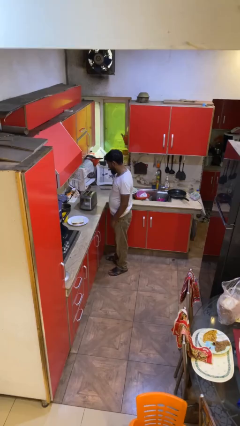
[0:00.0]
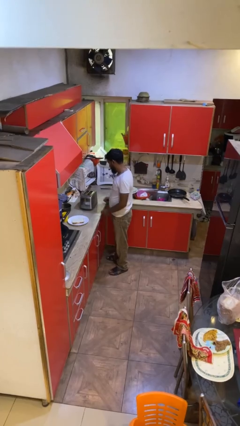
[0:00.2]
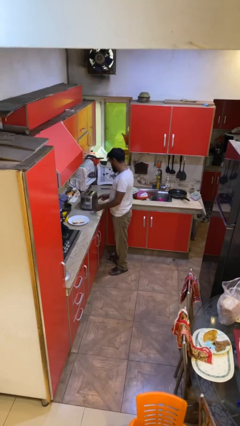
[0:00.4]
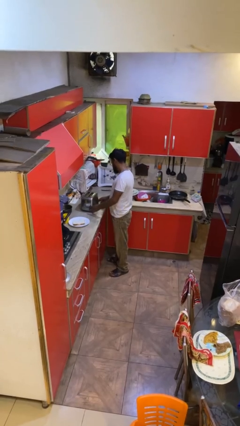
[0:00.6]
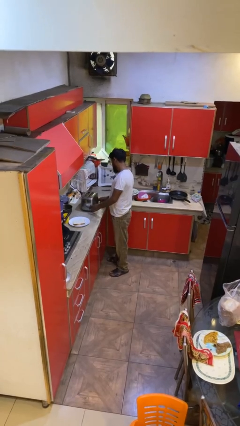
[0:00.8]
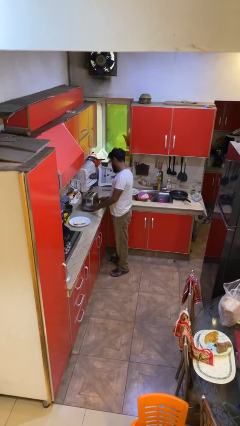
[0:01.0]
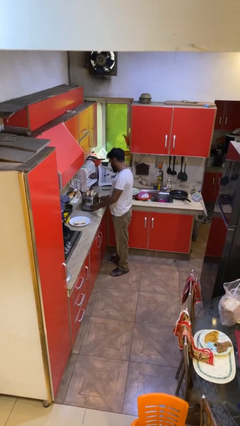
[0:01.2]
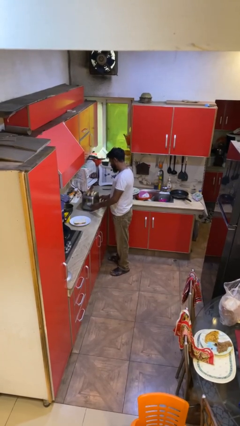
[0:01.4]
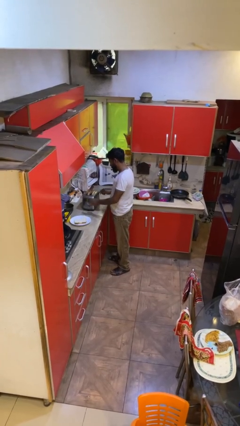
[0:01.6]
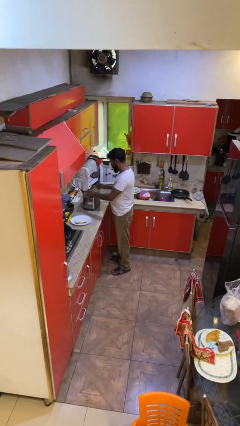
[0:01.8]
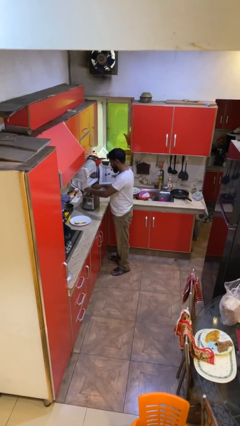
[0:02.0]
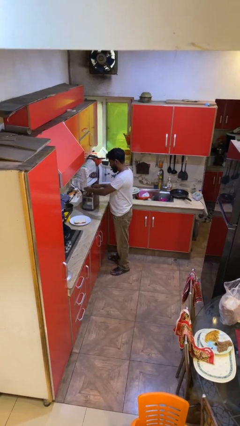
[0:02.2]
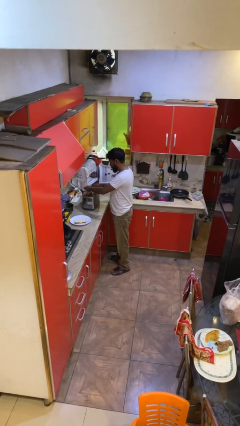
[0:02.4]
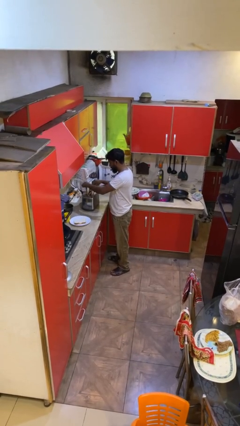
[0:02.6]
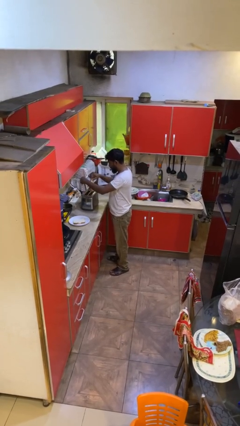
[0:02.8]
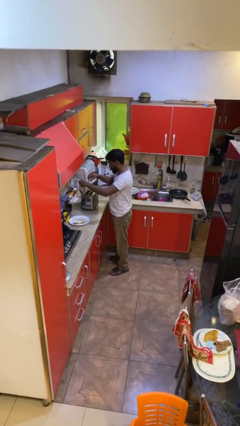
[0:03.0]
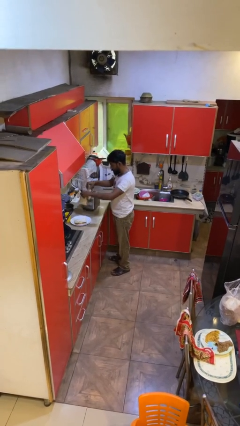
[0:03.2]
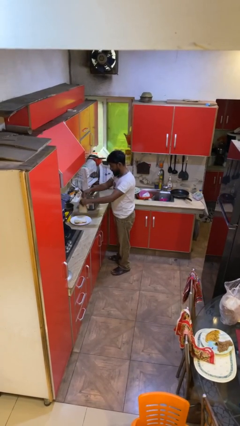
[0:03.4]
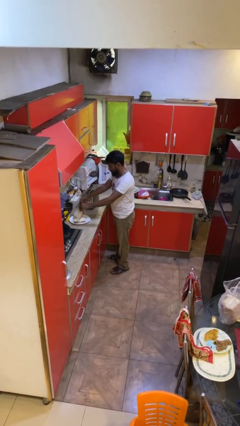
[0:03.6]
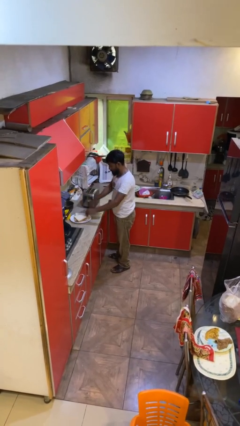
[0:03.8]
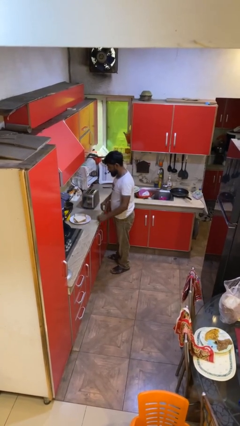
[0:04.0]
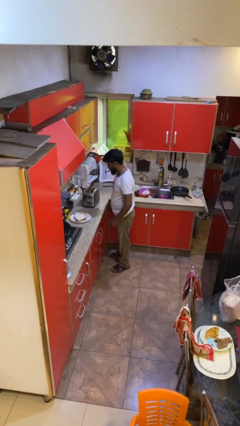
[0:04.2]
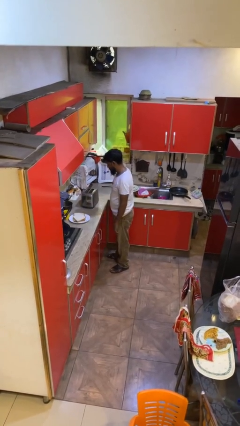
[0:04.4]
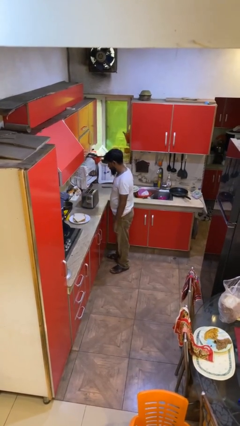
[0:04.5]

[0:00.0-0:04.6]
person takes object from toaster

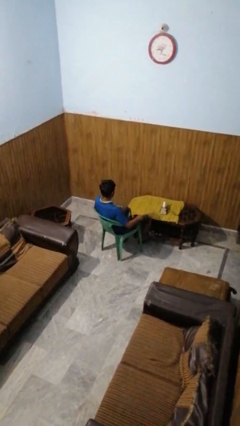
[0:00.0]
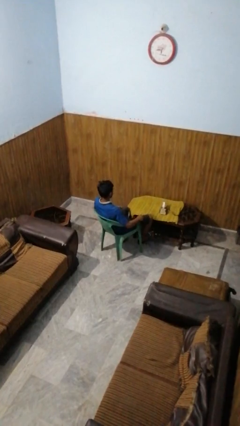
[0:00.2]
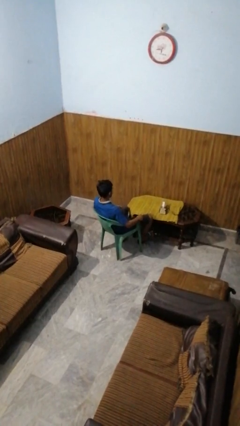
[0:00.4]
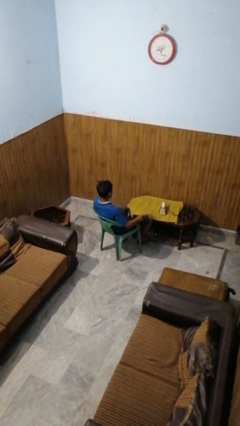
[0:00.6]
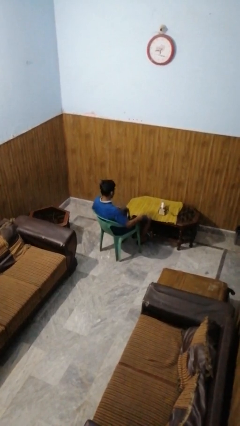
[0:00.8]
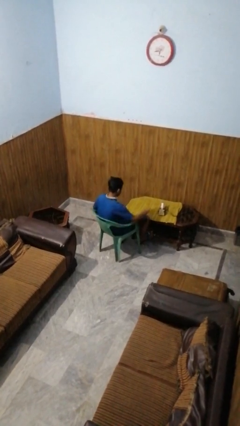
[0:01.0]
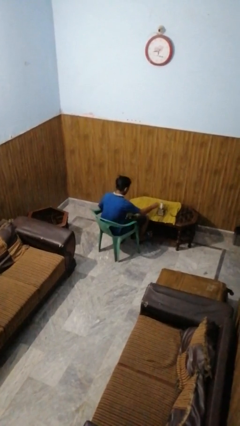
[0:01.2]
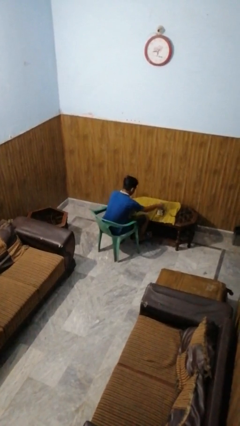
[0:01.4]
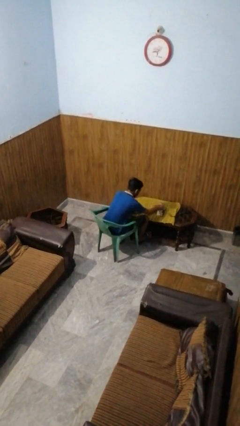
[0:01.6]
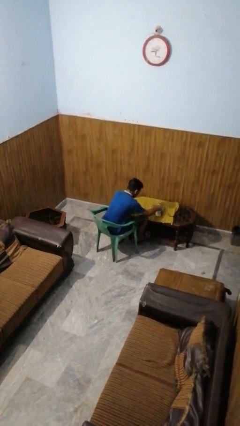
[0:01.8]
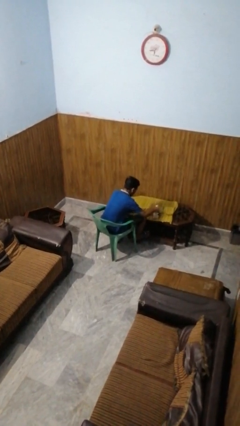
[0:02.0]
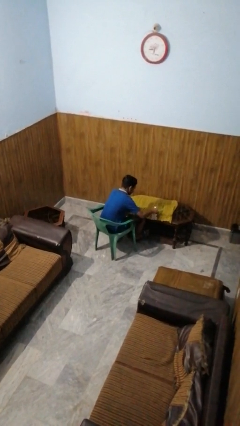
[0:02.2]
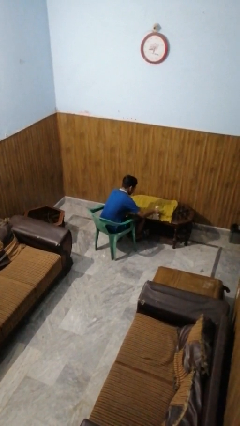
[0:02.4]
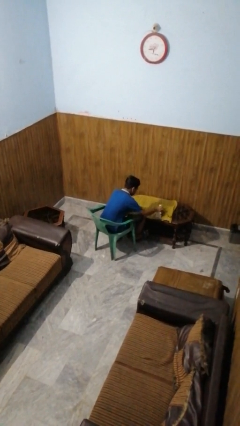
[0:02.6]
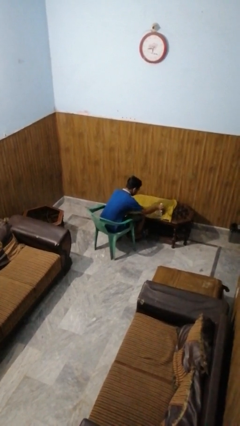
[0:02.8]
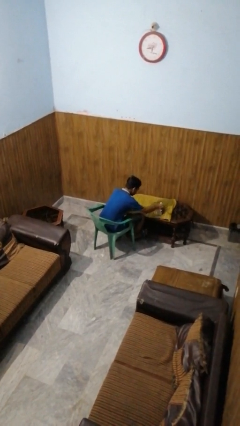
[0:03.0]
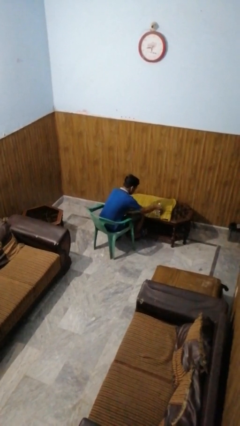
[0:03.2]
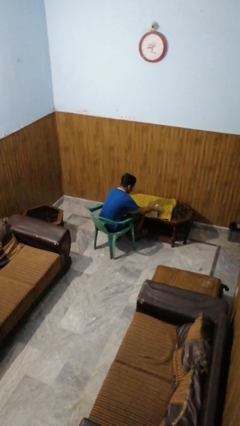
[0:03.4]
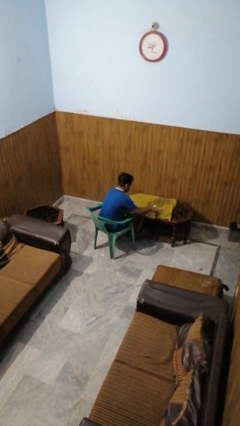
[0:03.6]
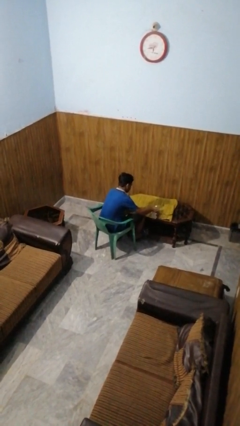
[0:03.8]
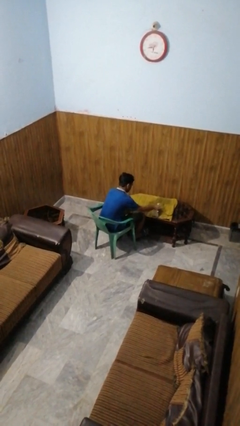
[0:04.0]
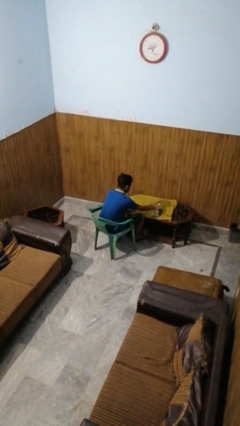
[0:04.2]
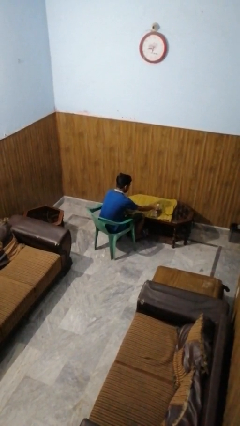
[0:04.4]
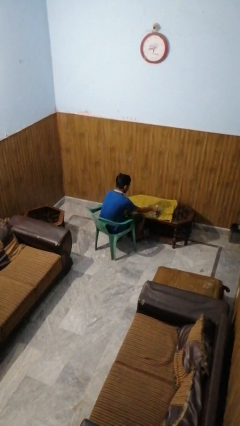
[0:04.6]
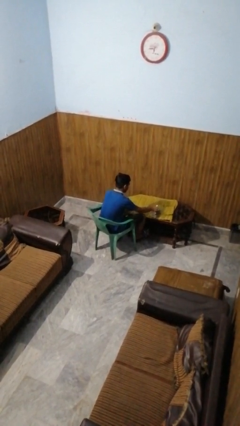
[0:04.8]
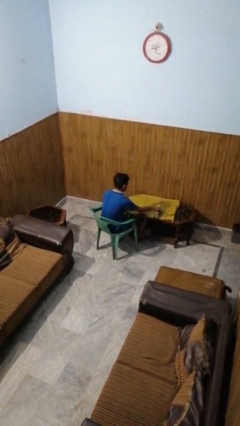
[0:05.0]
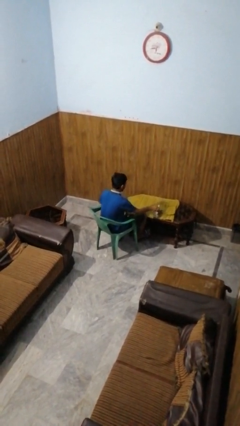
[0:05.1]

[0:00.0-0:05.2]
person irons clothes

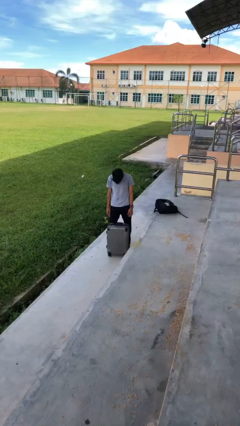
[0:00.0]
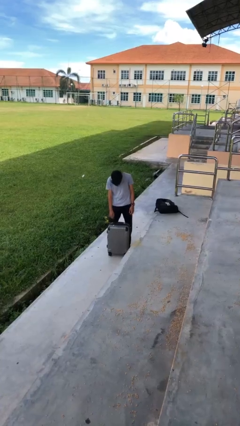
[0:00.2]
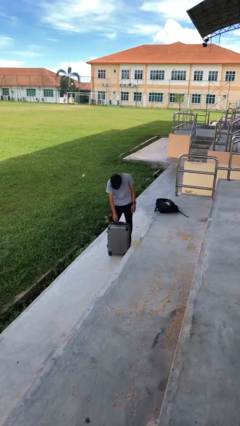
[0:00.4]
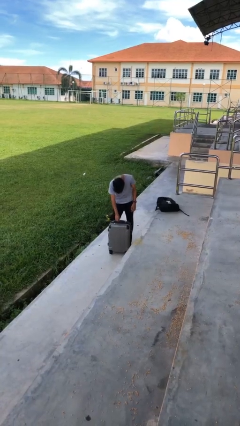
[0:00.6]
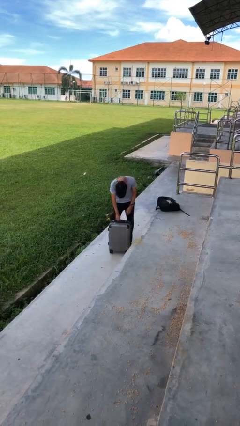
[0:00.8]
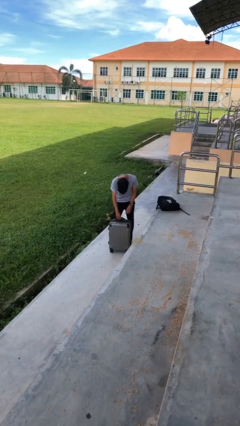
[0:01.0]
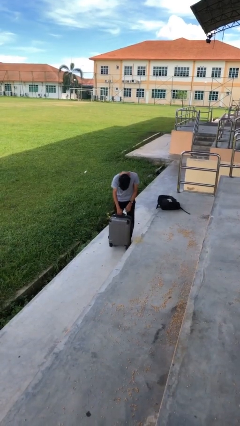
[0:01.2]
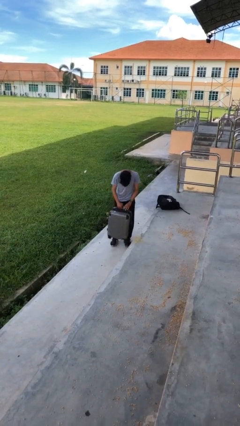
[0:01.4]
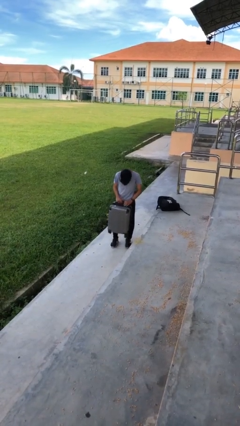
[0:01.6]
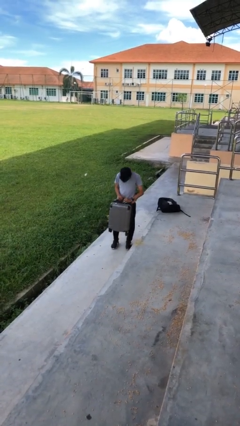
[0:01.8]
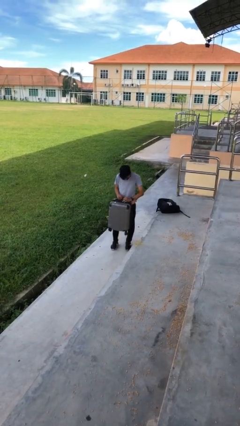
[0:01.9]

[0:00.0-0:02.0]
person picks up object from floor

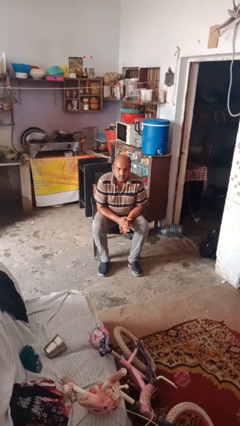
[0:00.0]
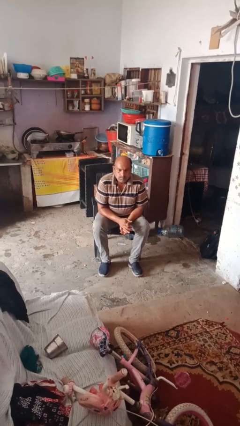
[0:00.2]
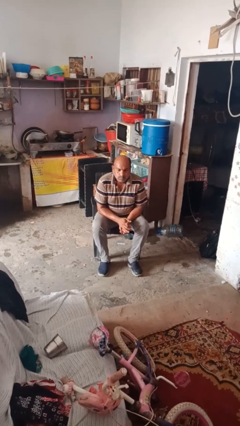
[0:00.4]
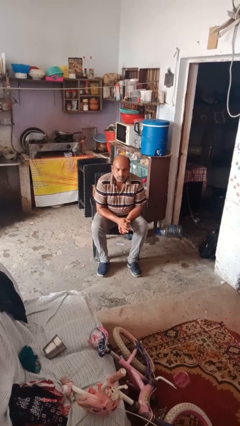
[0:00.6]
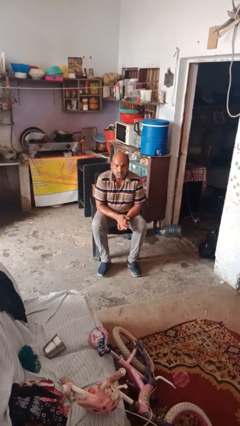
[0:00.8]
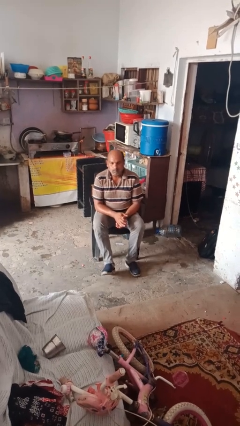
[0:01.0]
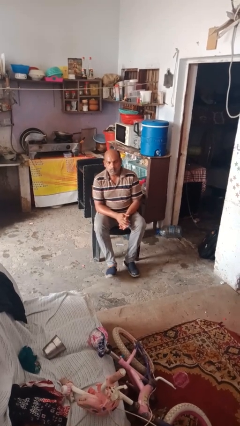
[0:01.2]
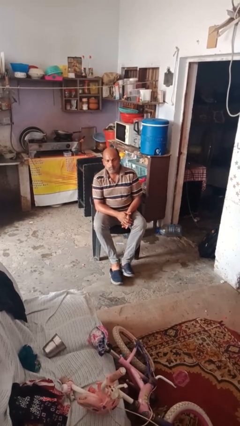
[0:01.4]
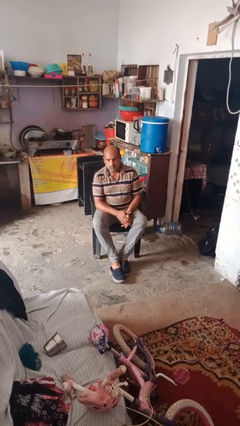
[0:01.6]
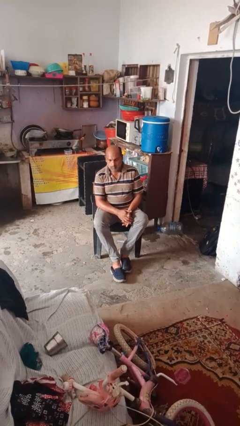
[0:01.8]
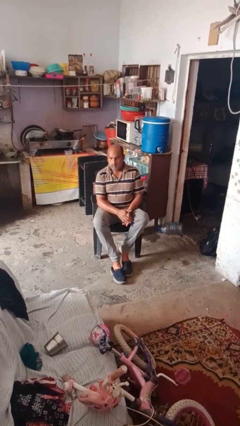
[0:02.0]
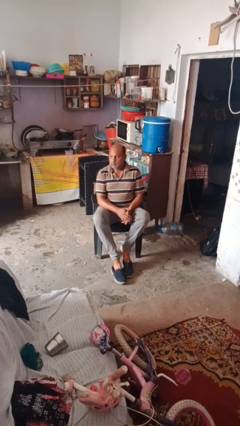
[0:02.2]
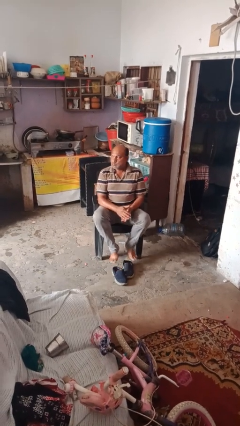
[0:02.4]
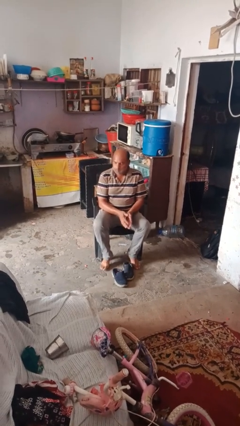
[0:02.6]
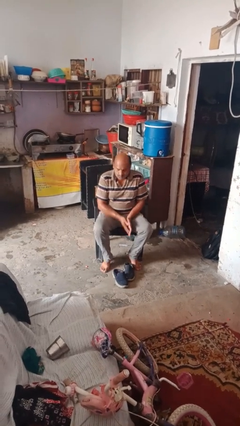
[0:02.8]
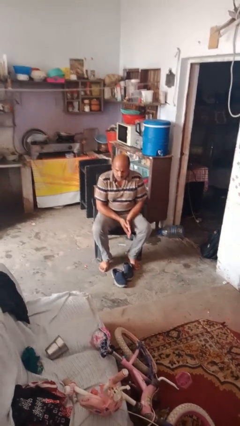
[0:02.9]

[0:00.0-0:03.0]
person takes off shoes

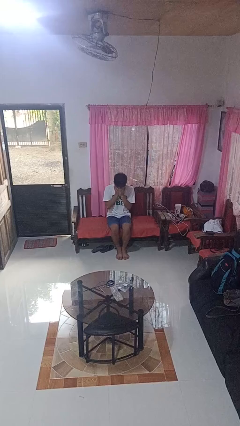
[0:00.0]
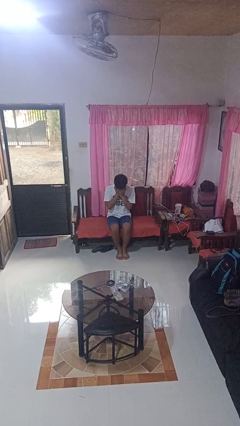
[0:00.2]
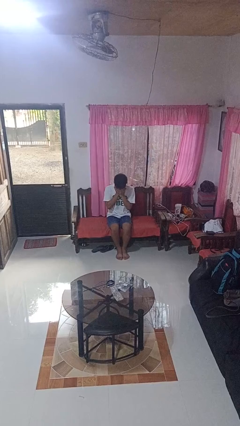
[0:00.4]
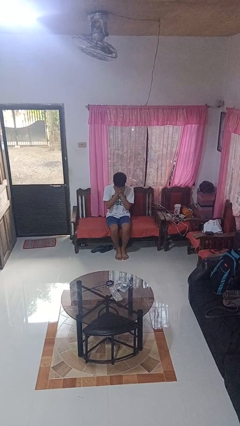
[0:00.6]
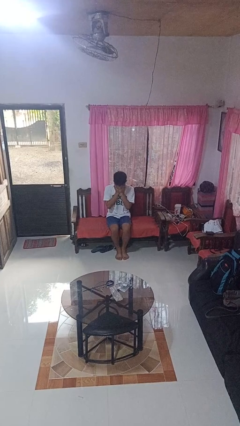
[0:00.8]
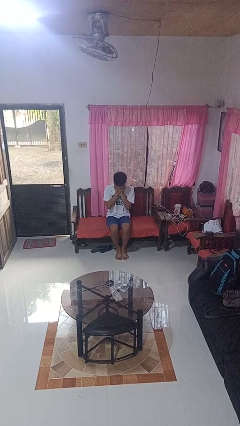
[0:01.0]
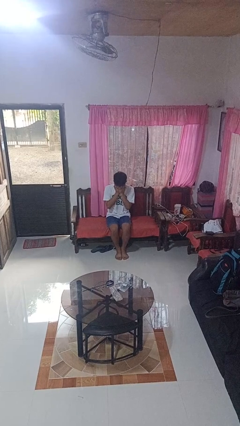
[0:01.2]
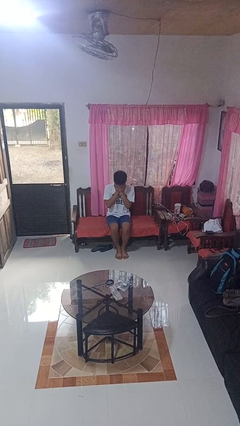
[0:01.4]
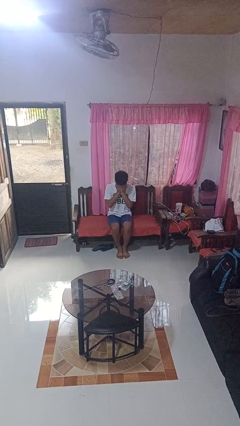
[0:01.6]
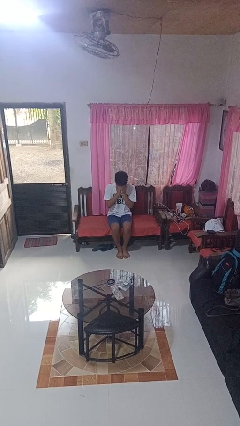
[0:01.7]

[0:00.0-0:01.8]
person covers face with hands

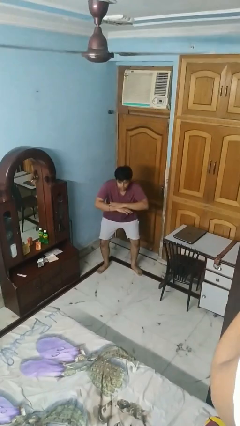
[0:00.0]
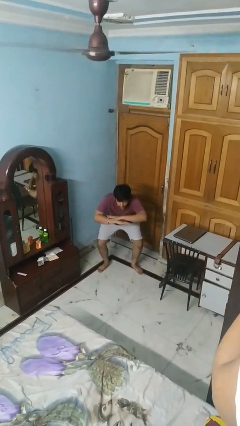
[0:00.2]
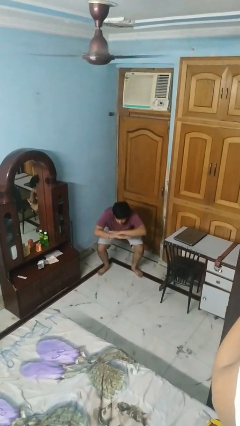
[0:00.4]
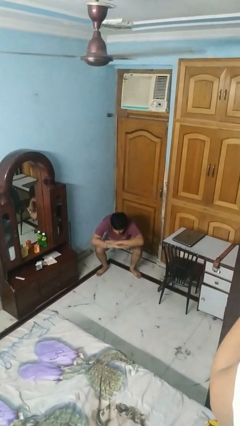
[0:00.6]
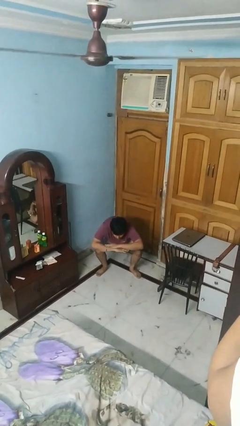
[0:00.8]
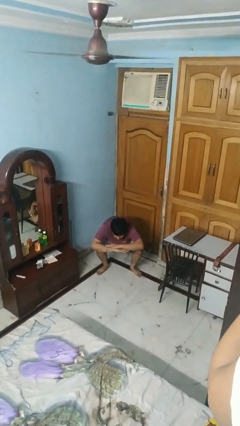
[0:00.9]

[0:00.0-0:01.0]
person squats
